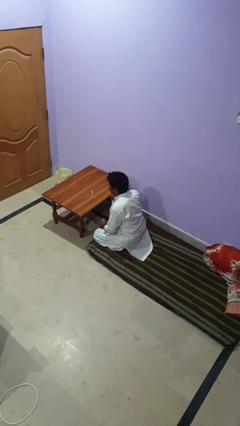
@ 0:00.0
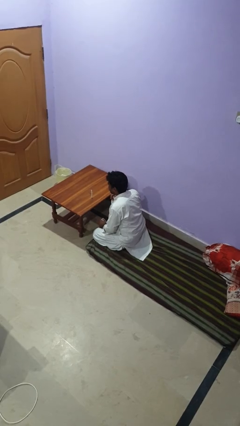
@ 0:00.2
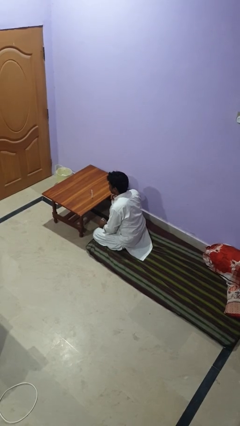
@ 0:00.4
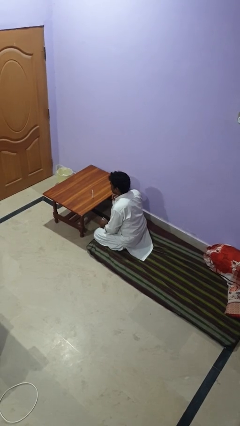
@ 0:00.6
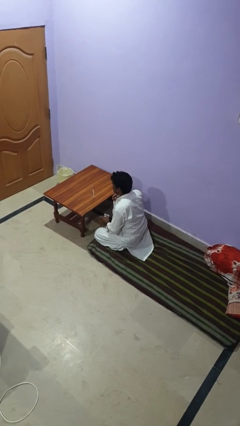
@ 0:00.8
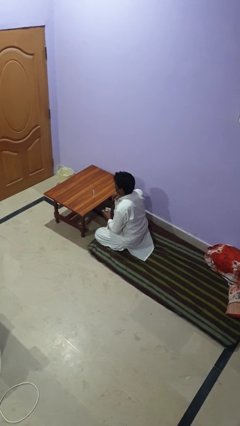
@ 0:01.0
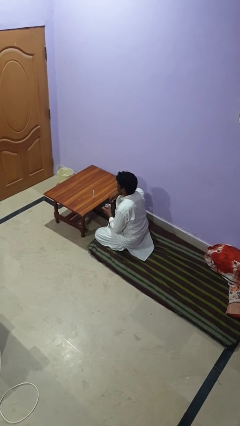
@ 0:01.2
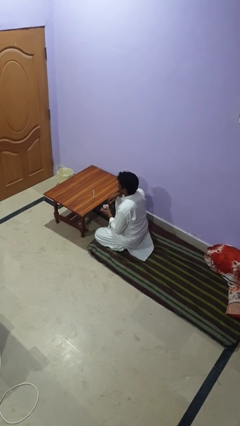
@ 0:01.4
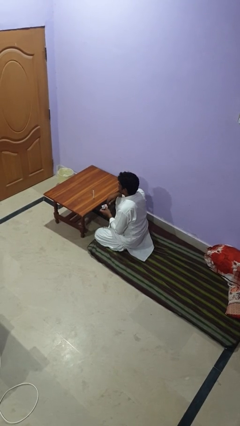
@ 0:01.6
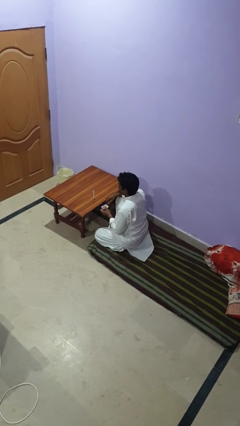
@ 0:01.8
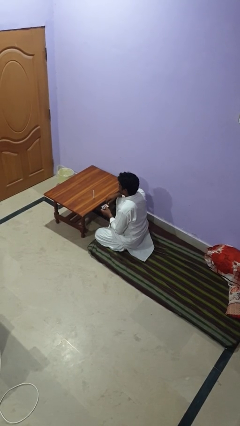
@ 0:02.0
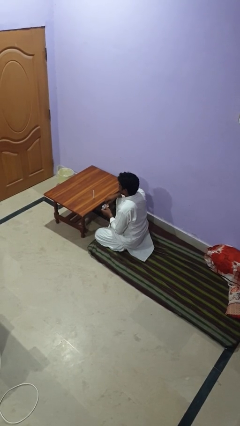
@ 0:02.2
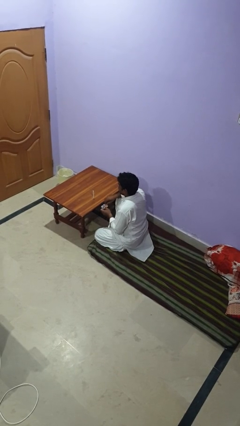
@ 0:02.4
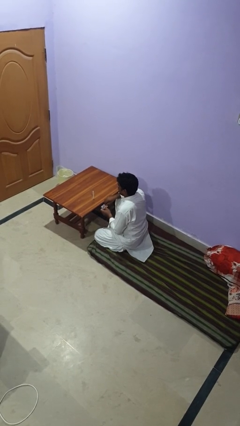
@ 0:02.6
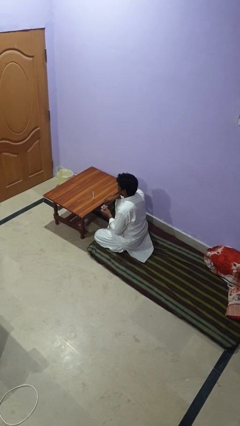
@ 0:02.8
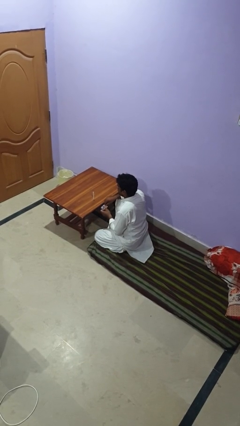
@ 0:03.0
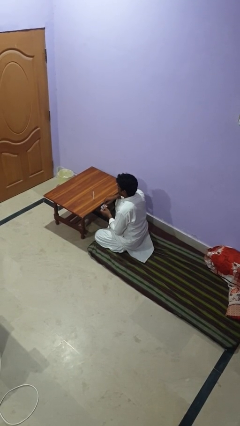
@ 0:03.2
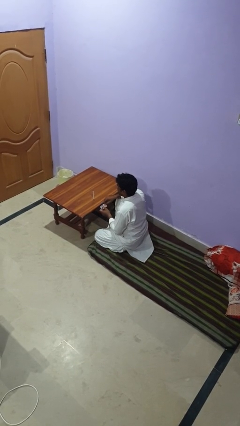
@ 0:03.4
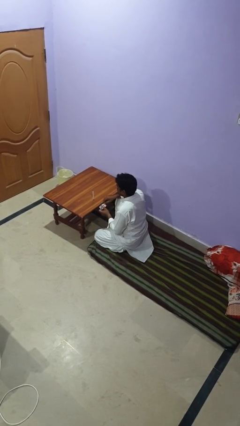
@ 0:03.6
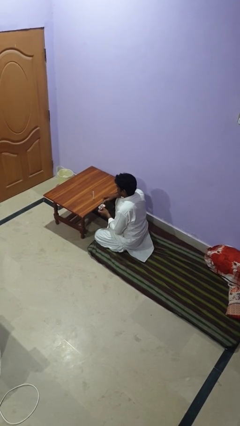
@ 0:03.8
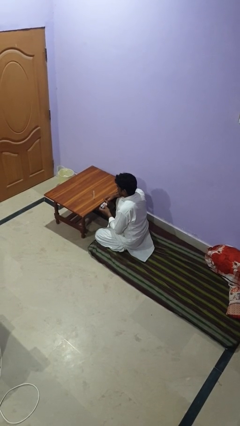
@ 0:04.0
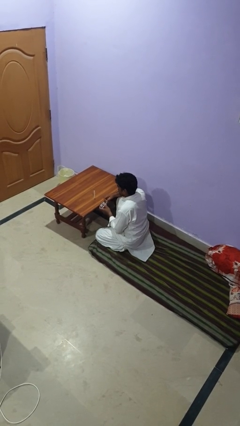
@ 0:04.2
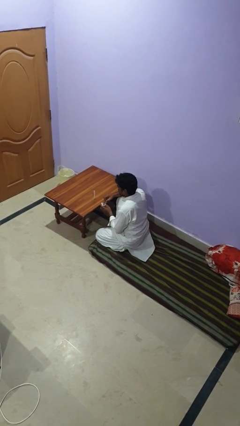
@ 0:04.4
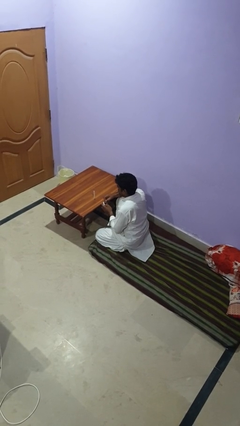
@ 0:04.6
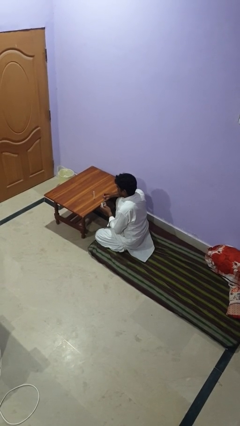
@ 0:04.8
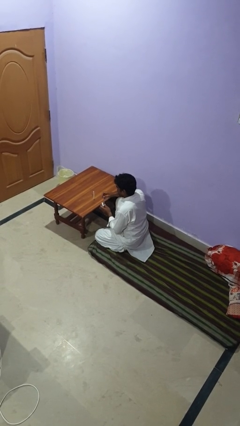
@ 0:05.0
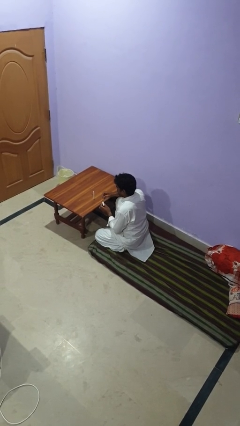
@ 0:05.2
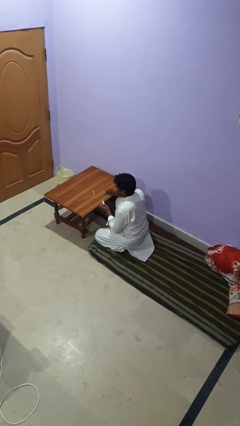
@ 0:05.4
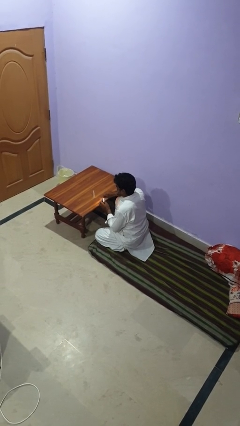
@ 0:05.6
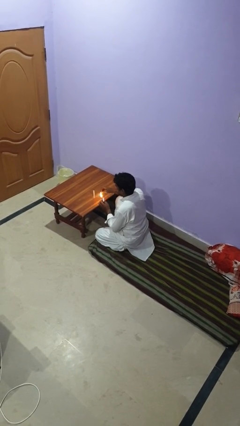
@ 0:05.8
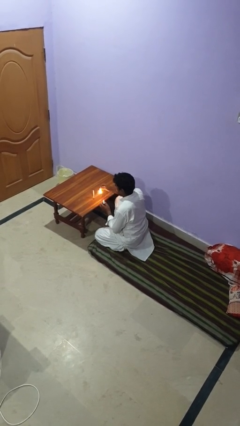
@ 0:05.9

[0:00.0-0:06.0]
person extinguishes candle

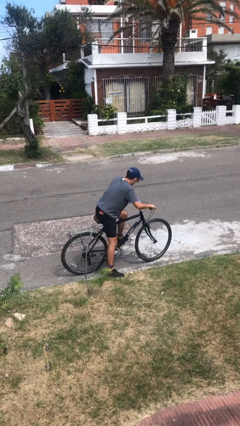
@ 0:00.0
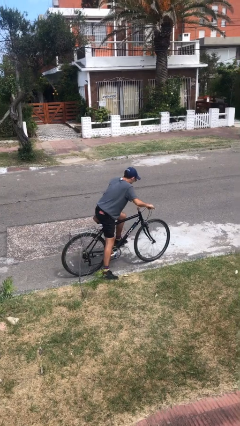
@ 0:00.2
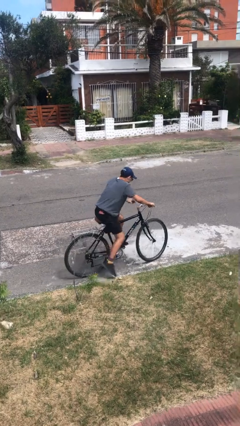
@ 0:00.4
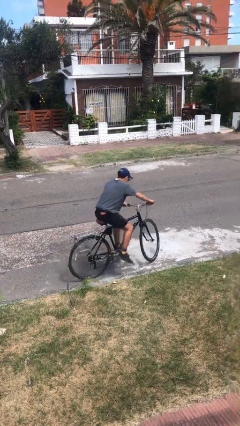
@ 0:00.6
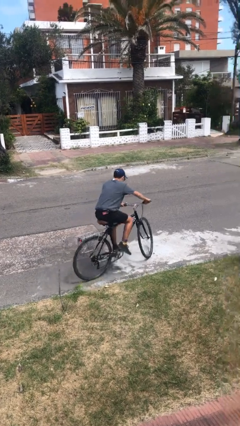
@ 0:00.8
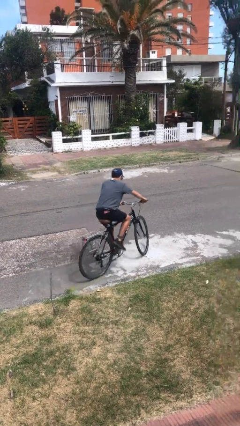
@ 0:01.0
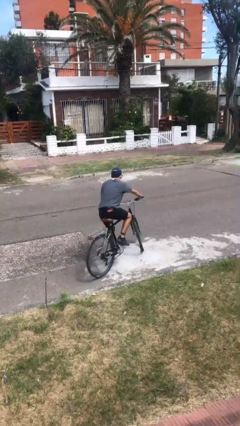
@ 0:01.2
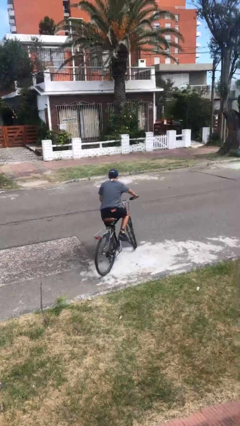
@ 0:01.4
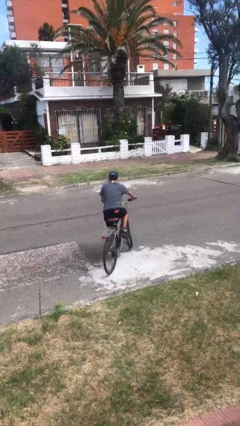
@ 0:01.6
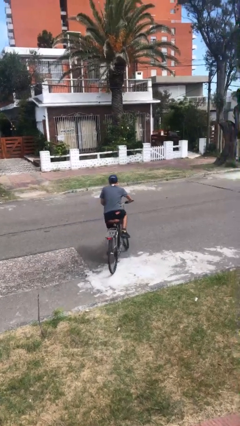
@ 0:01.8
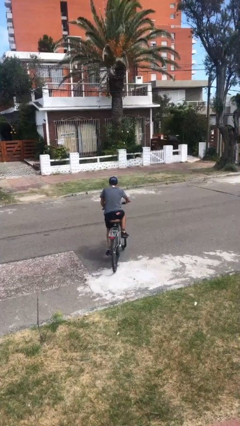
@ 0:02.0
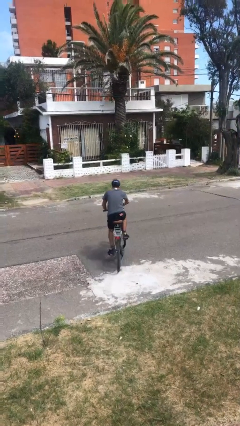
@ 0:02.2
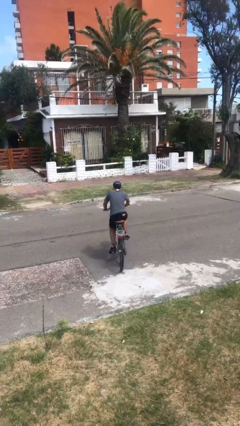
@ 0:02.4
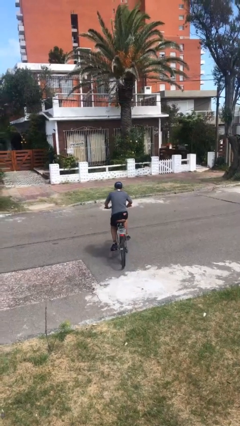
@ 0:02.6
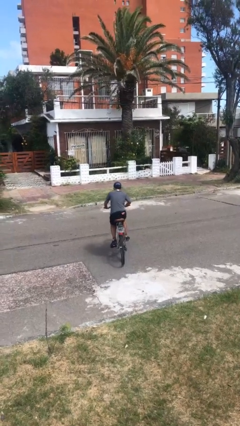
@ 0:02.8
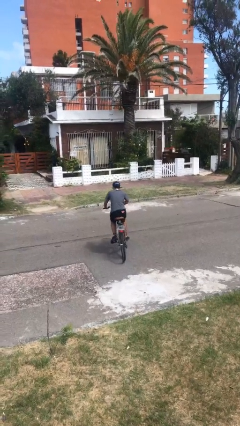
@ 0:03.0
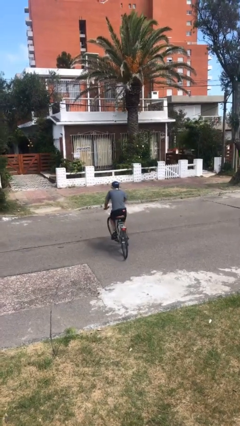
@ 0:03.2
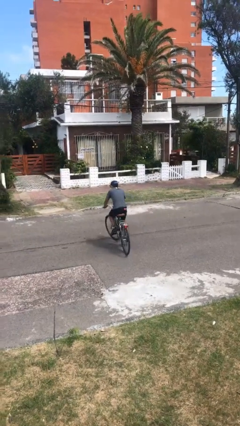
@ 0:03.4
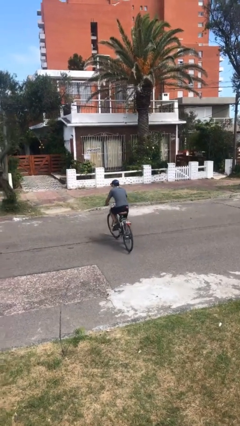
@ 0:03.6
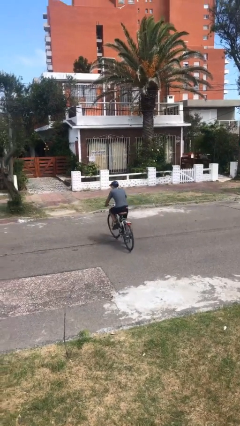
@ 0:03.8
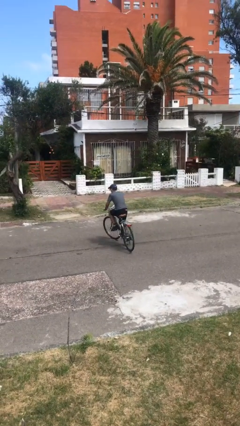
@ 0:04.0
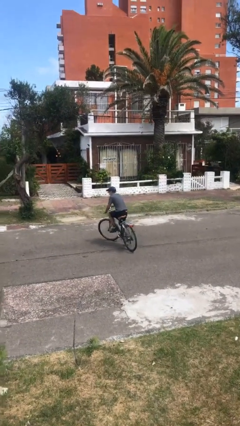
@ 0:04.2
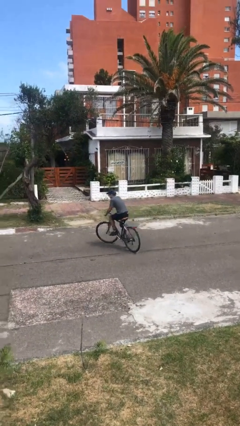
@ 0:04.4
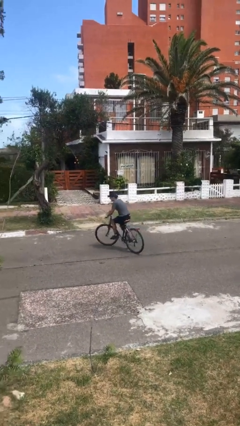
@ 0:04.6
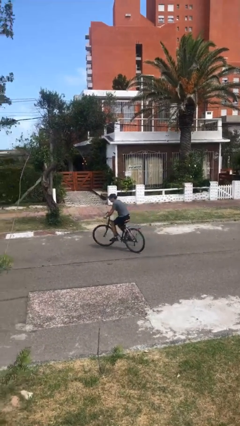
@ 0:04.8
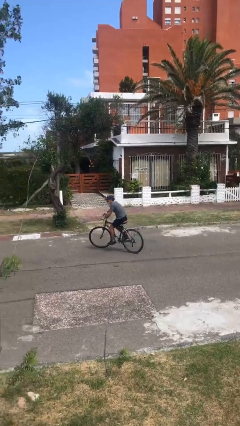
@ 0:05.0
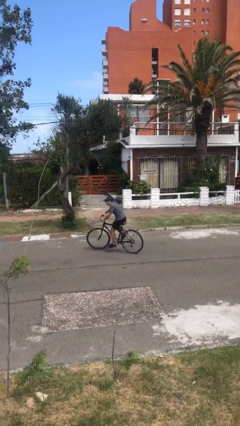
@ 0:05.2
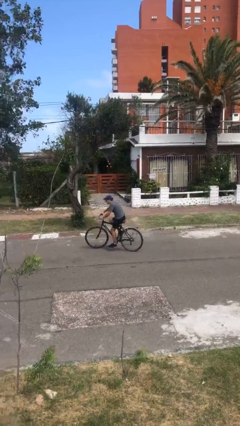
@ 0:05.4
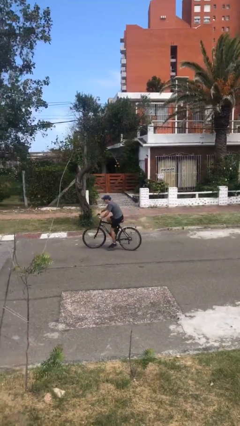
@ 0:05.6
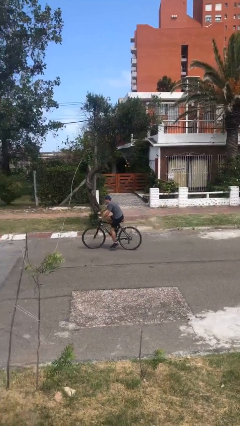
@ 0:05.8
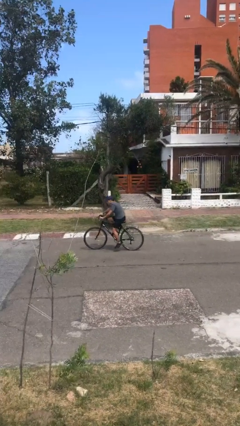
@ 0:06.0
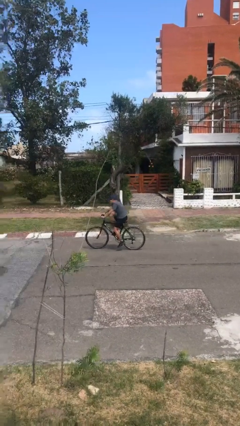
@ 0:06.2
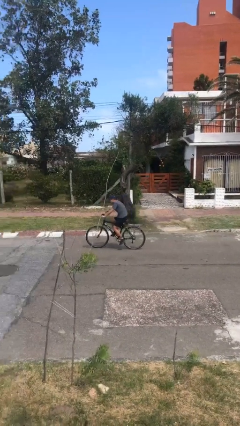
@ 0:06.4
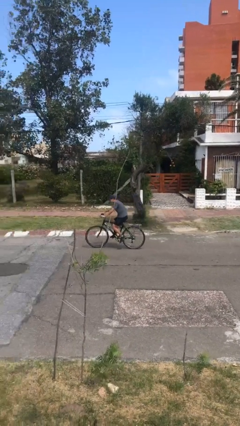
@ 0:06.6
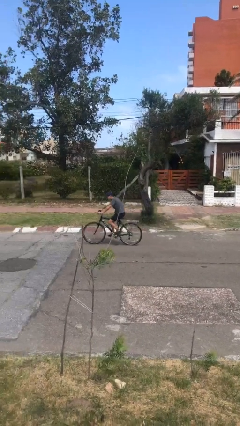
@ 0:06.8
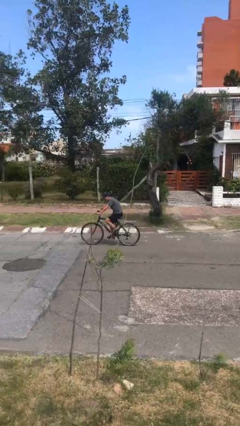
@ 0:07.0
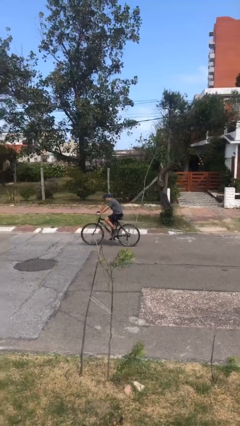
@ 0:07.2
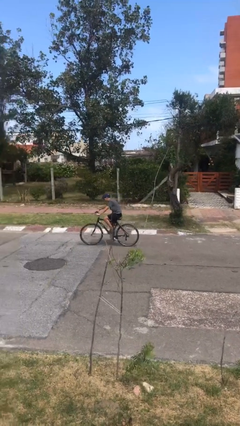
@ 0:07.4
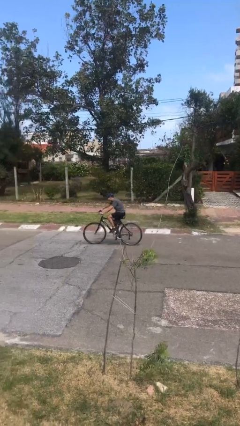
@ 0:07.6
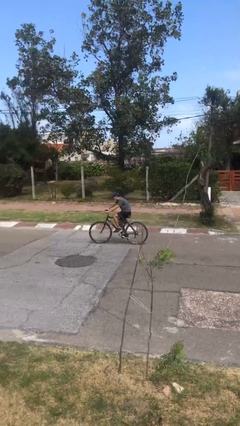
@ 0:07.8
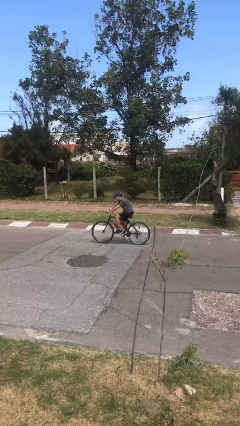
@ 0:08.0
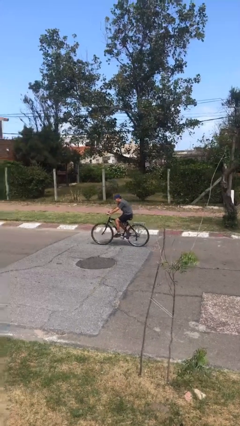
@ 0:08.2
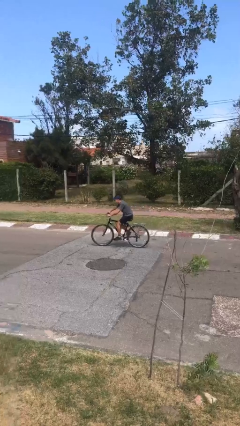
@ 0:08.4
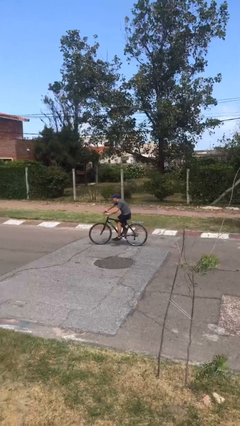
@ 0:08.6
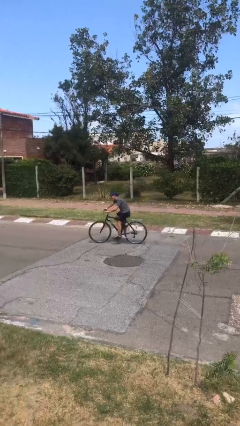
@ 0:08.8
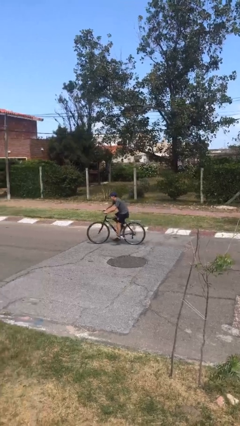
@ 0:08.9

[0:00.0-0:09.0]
person rides bicycle

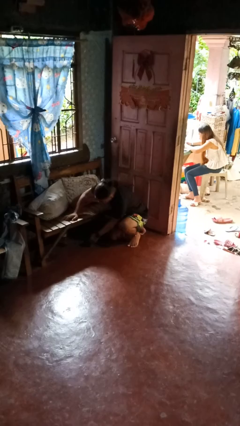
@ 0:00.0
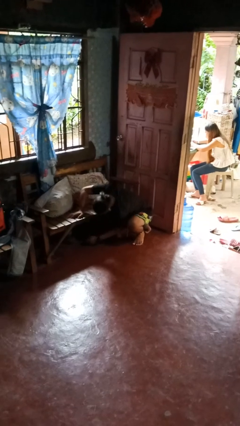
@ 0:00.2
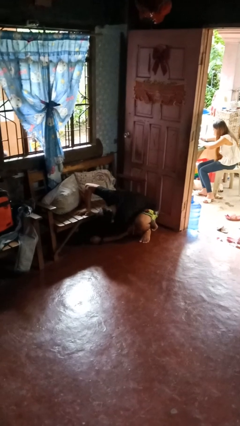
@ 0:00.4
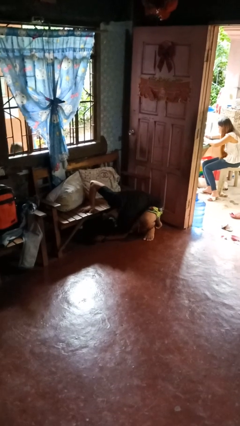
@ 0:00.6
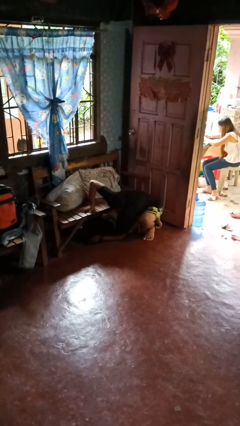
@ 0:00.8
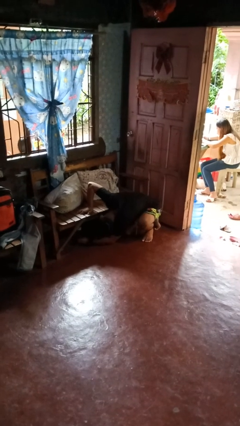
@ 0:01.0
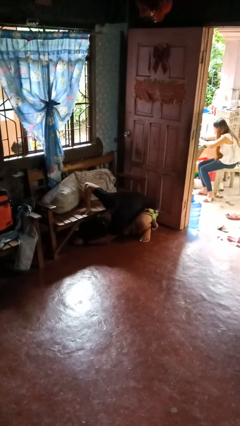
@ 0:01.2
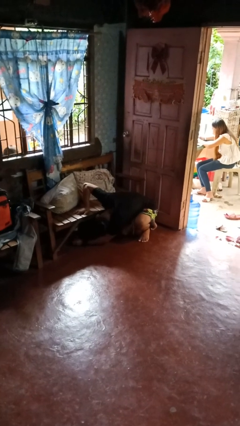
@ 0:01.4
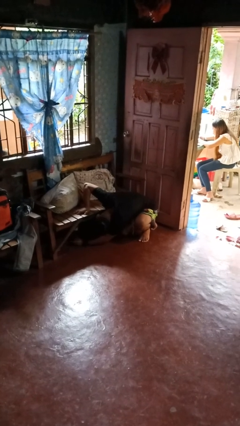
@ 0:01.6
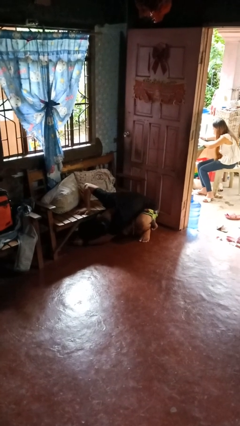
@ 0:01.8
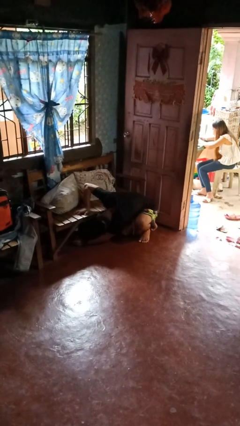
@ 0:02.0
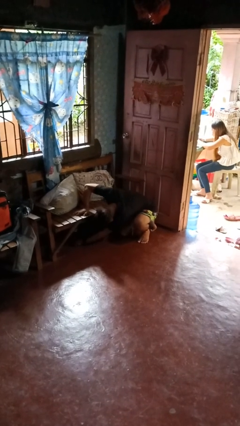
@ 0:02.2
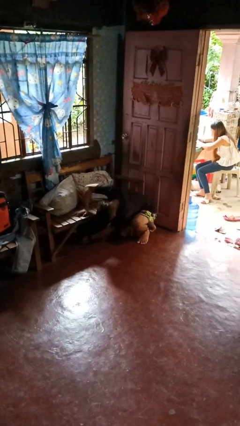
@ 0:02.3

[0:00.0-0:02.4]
person searches under couch

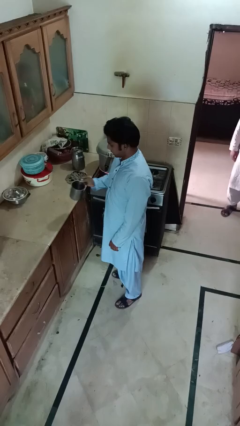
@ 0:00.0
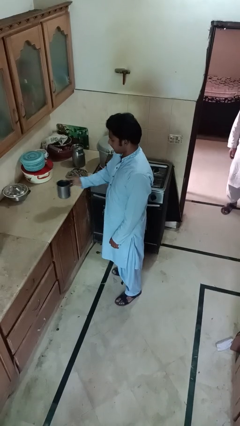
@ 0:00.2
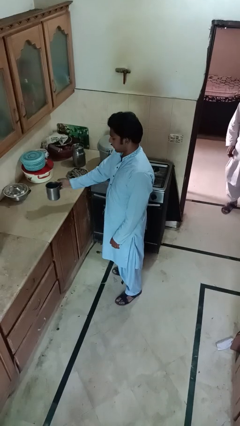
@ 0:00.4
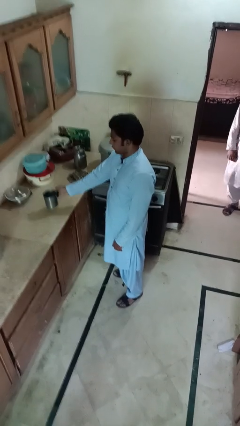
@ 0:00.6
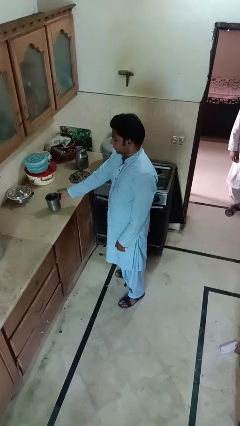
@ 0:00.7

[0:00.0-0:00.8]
person puts down object on countertop
